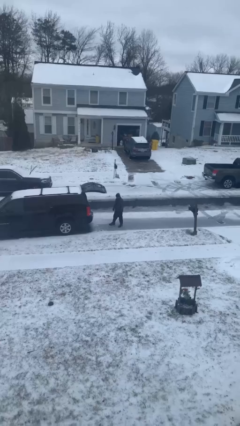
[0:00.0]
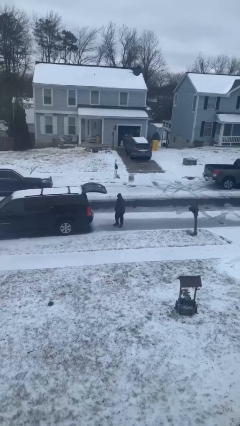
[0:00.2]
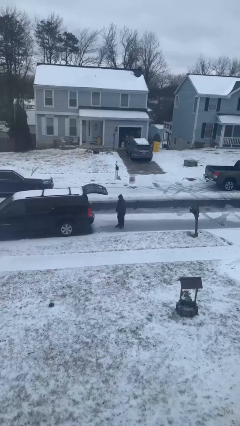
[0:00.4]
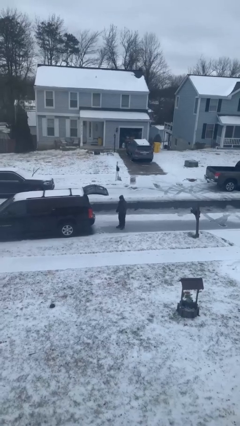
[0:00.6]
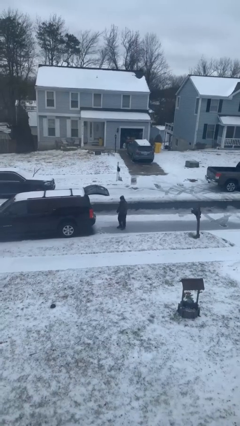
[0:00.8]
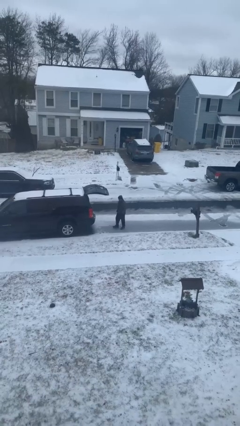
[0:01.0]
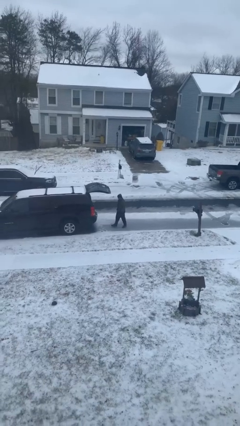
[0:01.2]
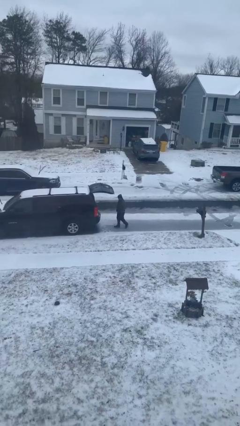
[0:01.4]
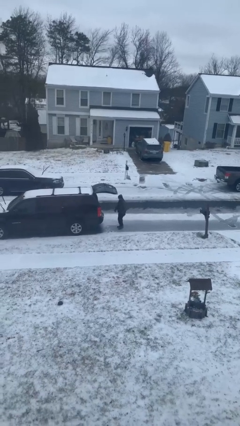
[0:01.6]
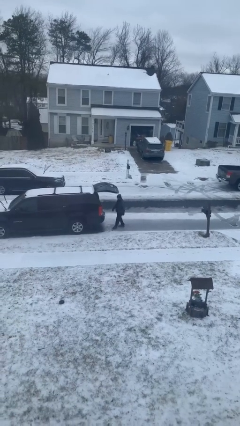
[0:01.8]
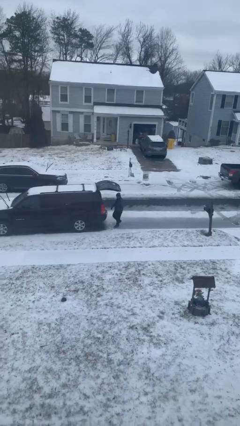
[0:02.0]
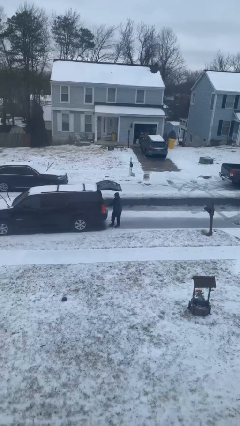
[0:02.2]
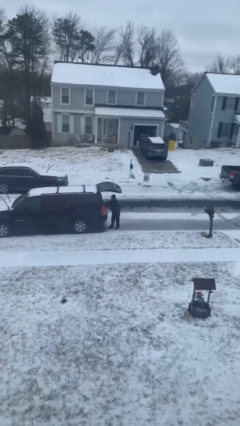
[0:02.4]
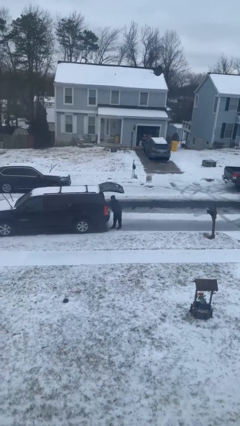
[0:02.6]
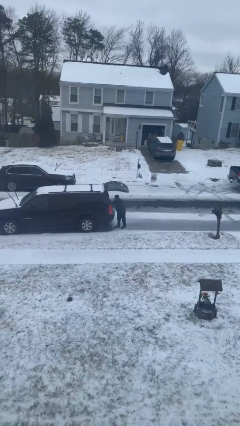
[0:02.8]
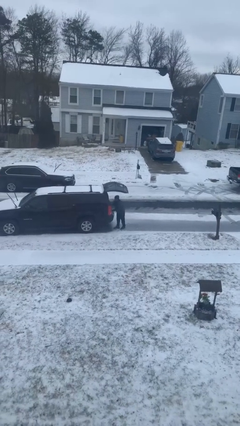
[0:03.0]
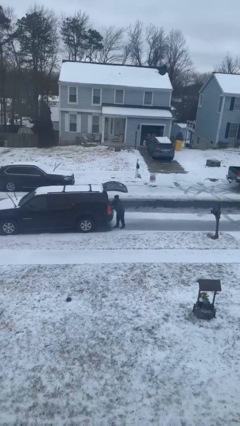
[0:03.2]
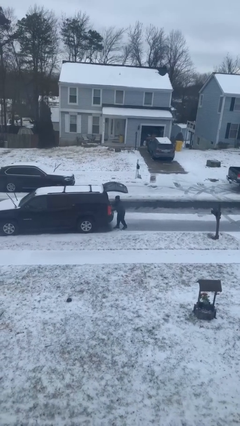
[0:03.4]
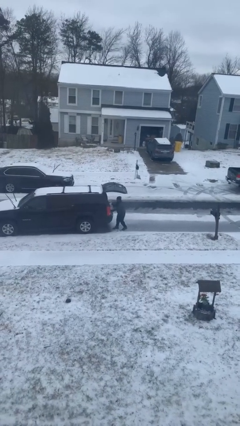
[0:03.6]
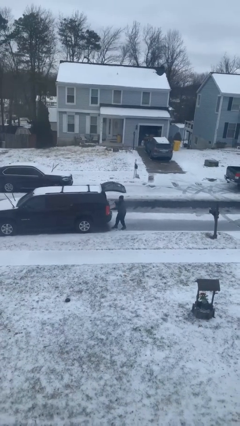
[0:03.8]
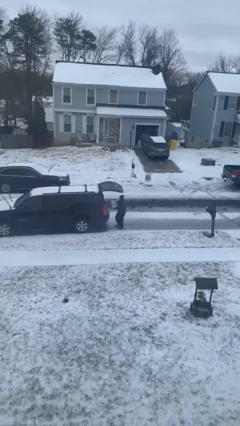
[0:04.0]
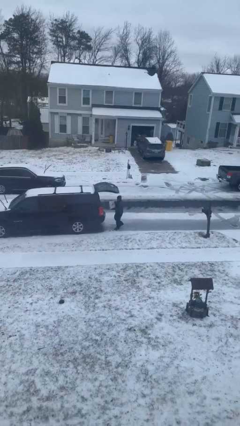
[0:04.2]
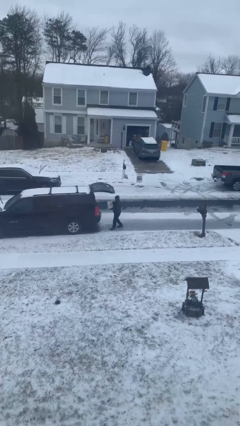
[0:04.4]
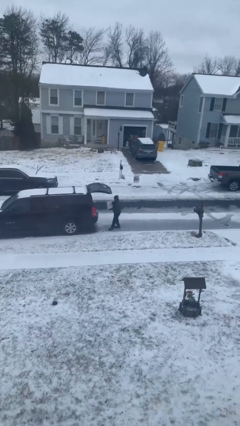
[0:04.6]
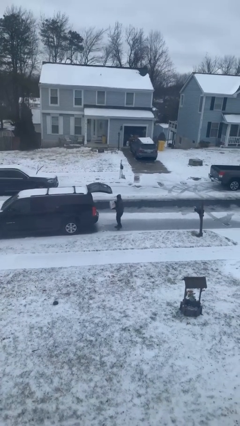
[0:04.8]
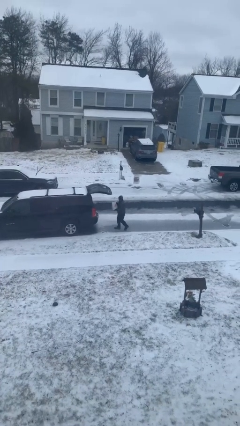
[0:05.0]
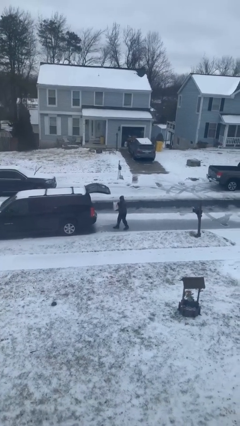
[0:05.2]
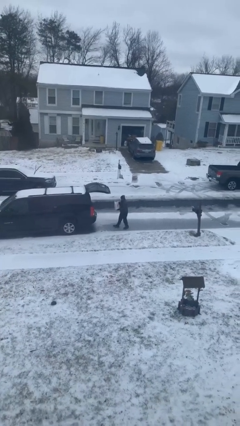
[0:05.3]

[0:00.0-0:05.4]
person unloads car

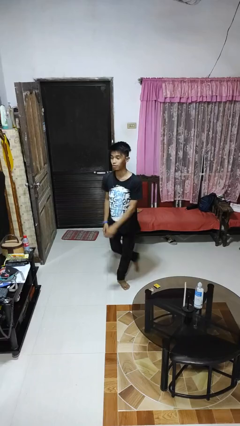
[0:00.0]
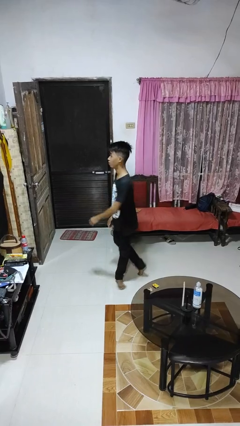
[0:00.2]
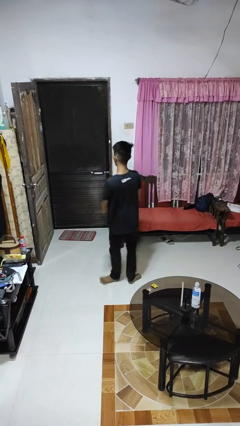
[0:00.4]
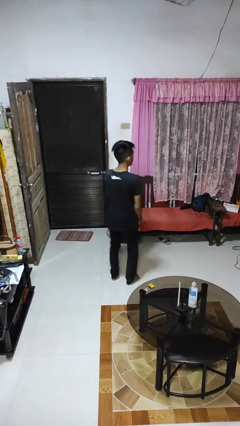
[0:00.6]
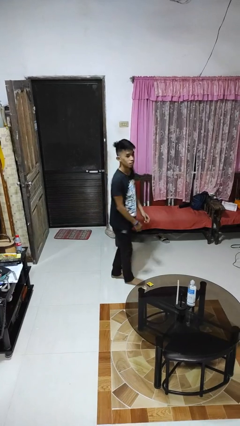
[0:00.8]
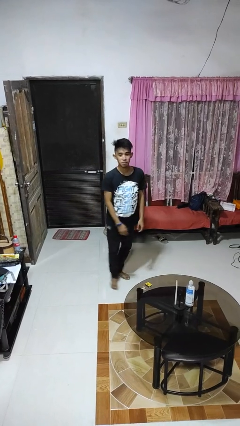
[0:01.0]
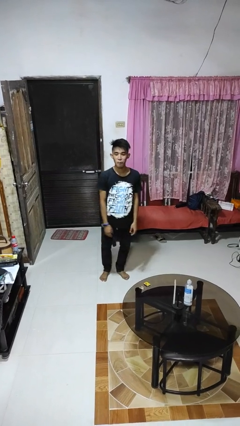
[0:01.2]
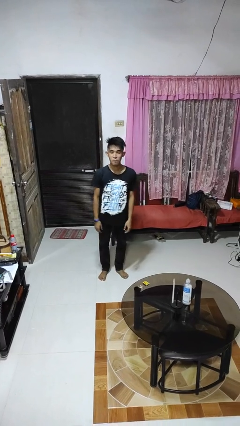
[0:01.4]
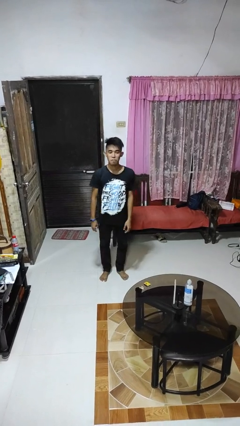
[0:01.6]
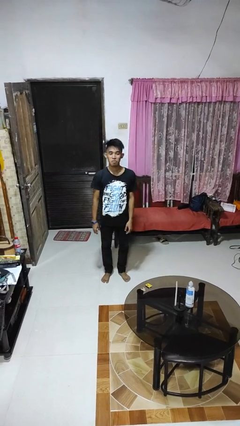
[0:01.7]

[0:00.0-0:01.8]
person twirls

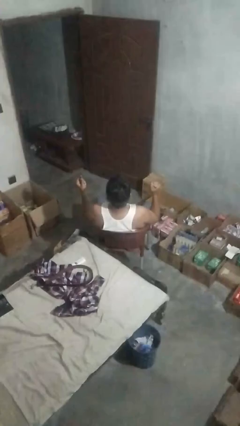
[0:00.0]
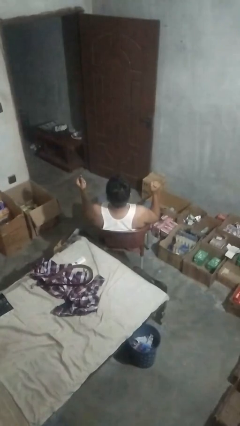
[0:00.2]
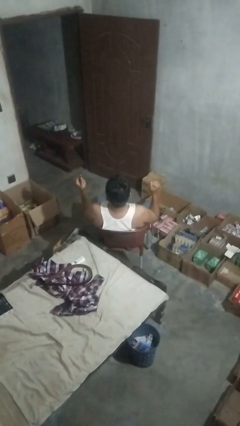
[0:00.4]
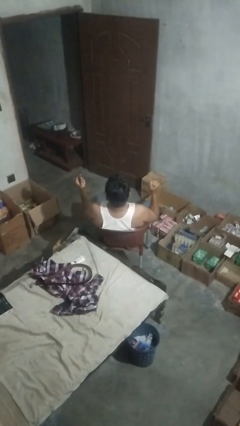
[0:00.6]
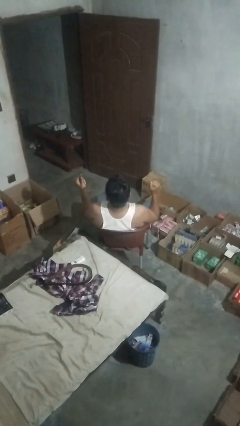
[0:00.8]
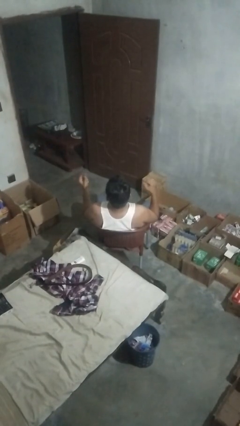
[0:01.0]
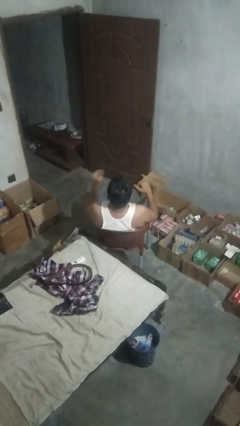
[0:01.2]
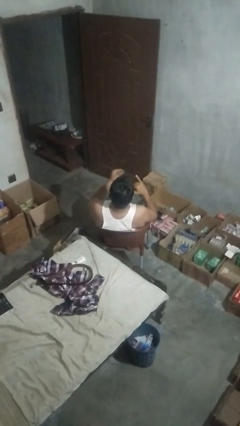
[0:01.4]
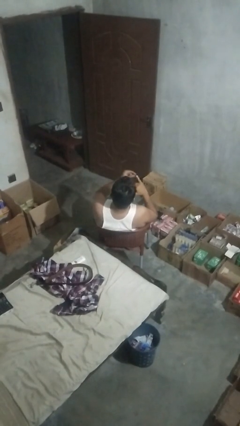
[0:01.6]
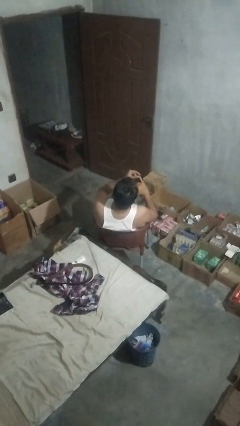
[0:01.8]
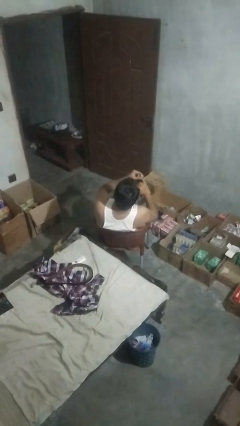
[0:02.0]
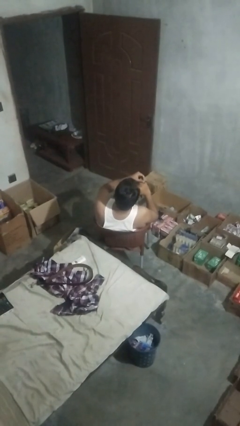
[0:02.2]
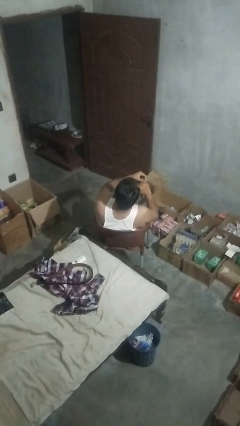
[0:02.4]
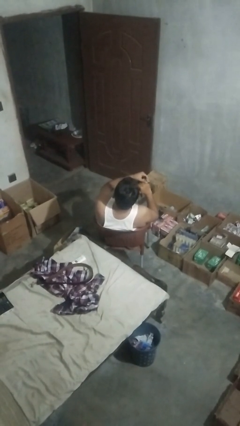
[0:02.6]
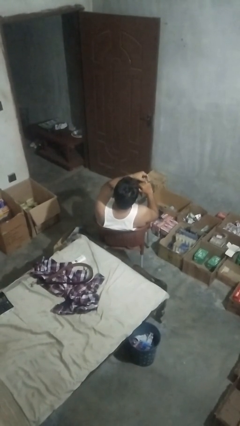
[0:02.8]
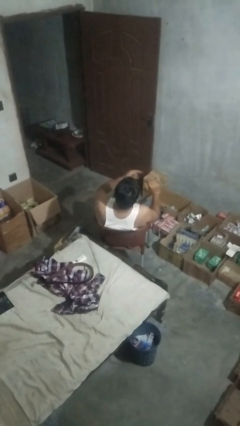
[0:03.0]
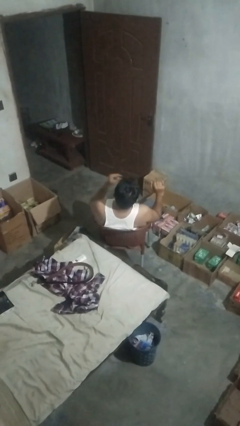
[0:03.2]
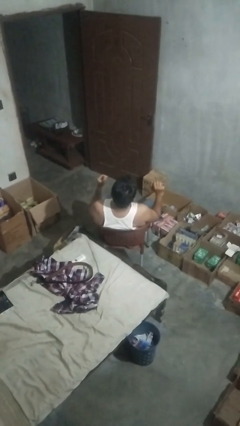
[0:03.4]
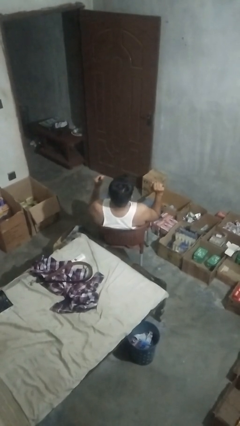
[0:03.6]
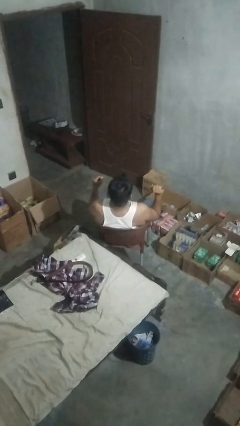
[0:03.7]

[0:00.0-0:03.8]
person puts on ring

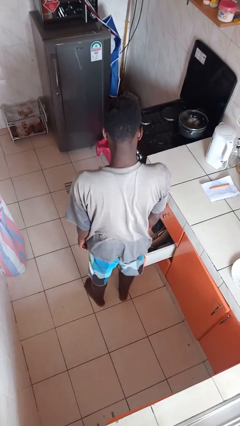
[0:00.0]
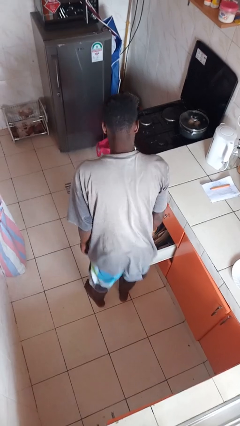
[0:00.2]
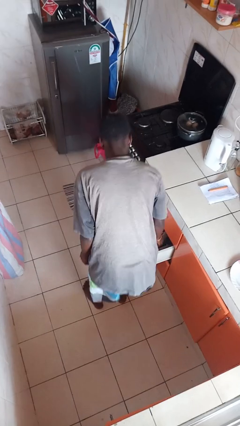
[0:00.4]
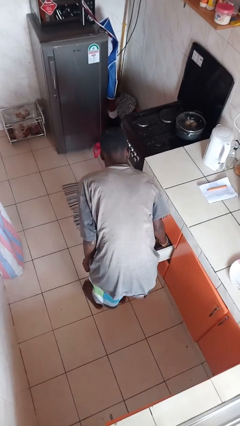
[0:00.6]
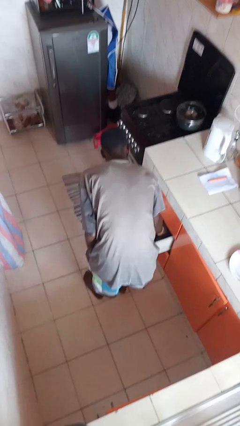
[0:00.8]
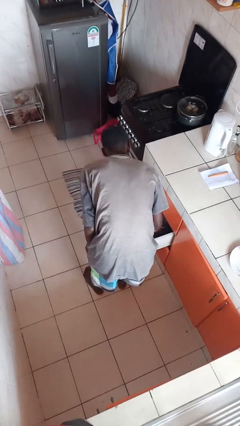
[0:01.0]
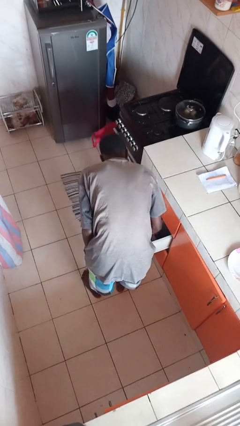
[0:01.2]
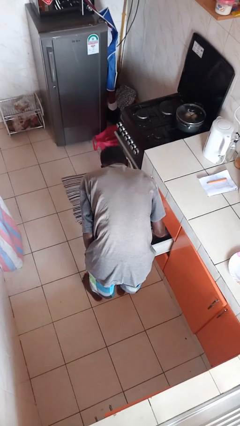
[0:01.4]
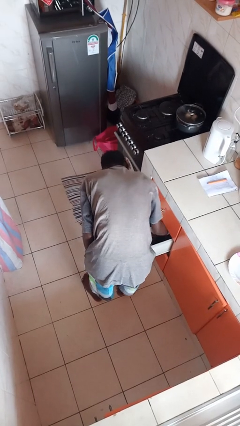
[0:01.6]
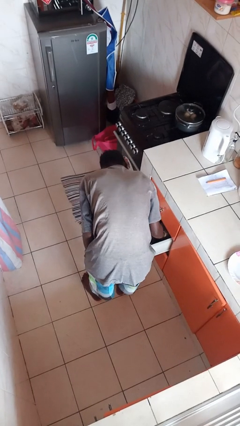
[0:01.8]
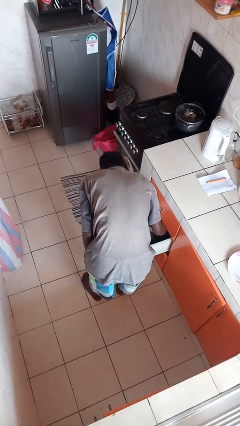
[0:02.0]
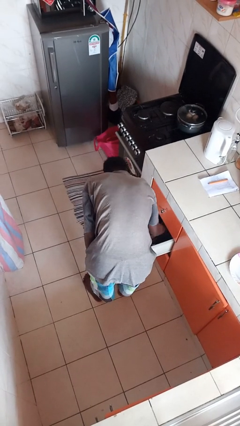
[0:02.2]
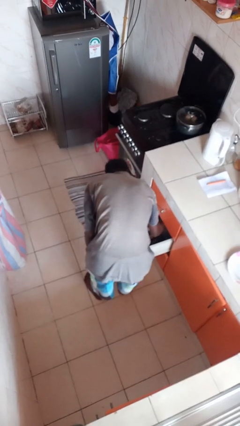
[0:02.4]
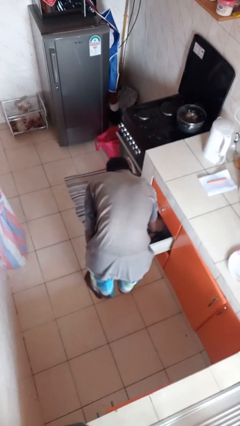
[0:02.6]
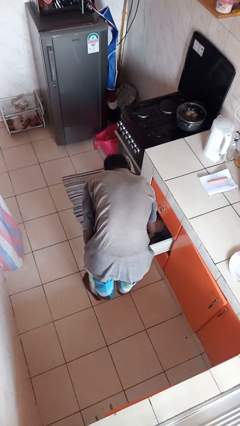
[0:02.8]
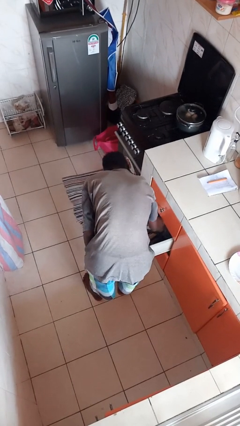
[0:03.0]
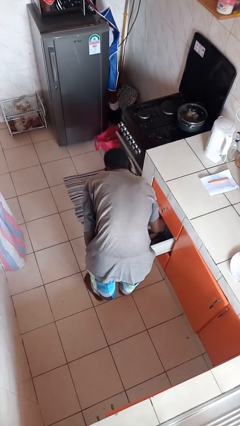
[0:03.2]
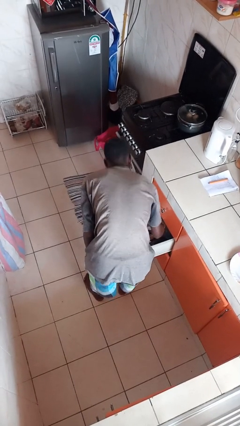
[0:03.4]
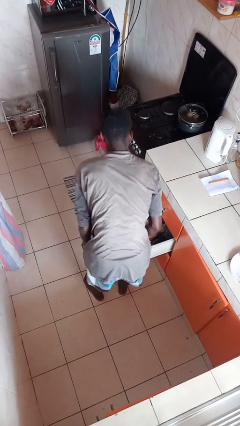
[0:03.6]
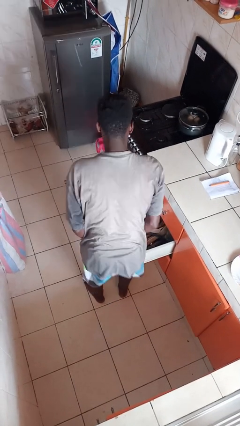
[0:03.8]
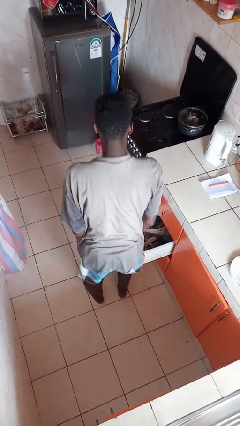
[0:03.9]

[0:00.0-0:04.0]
person searches in kitchen drawer

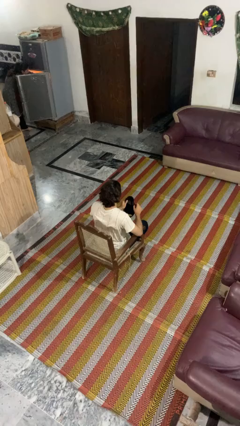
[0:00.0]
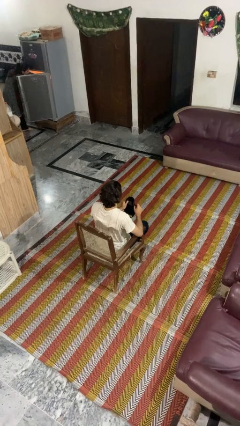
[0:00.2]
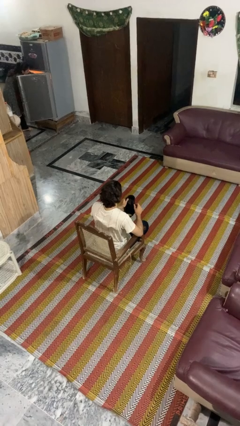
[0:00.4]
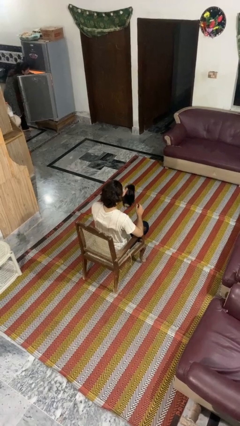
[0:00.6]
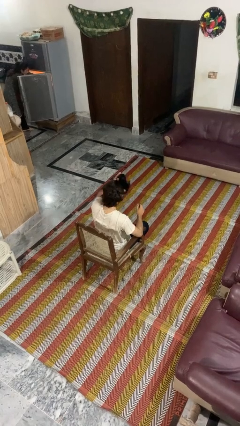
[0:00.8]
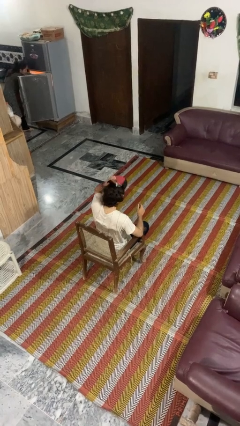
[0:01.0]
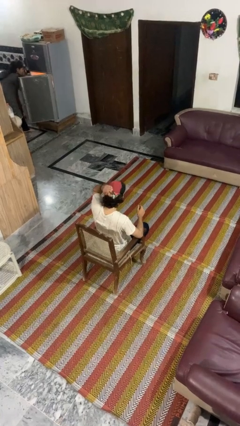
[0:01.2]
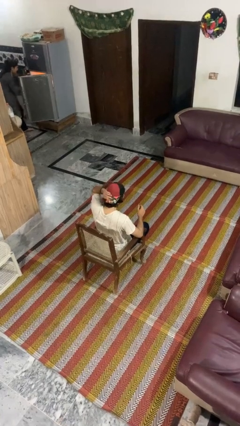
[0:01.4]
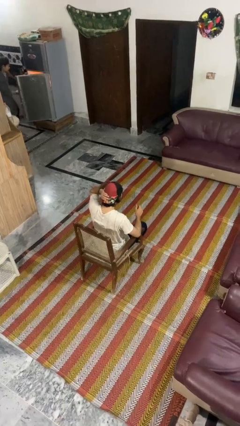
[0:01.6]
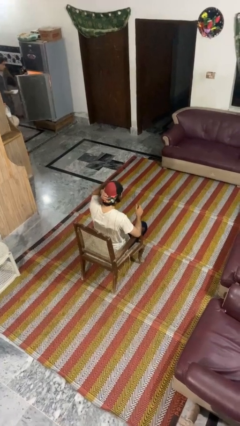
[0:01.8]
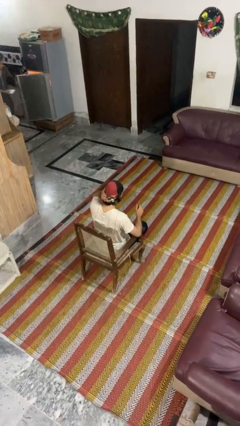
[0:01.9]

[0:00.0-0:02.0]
person puts on hat

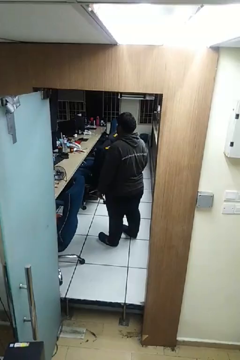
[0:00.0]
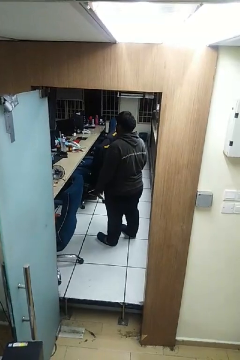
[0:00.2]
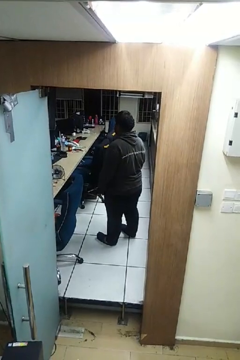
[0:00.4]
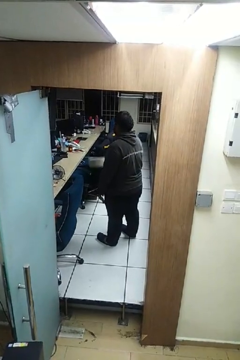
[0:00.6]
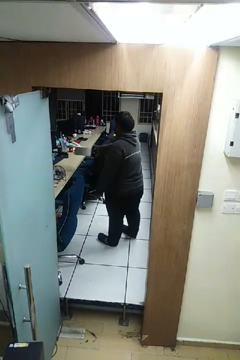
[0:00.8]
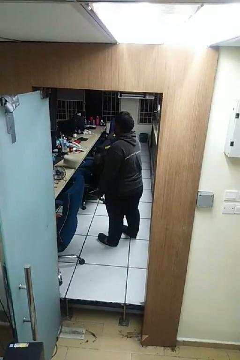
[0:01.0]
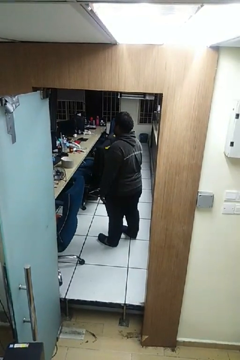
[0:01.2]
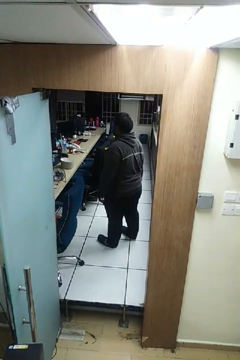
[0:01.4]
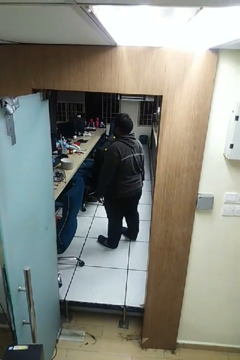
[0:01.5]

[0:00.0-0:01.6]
person throws object on table
